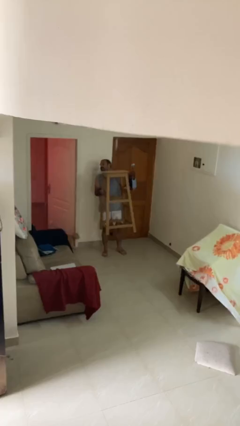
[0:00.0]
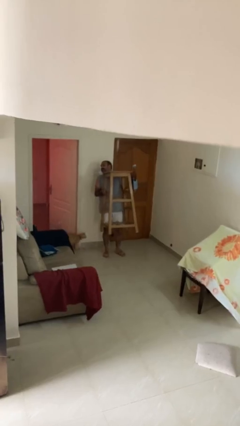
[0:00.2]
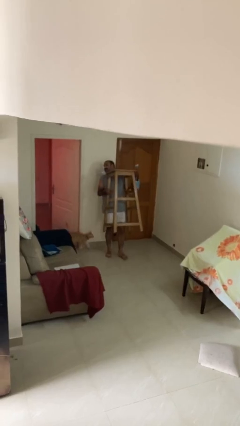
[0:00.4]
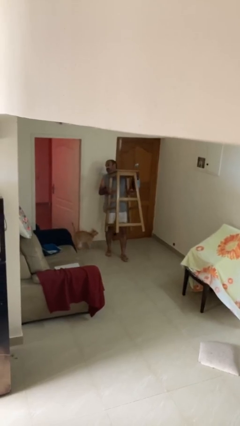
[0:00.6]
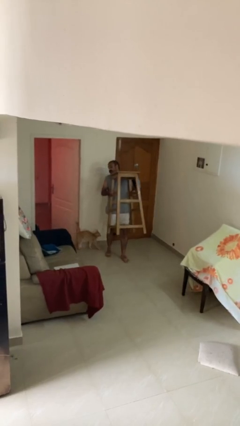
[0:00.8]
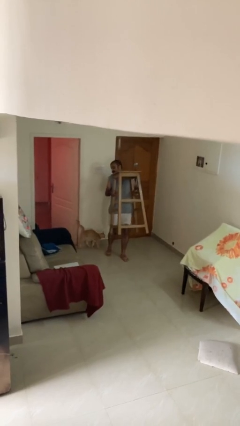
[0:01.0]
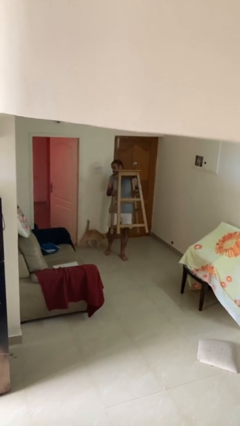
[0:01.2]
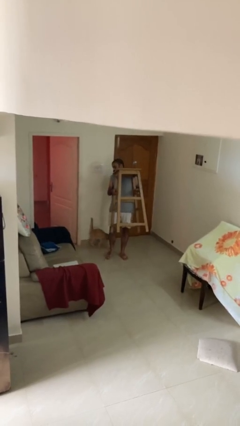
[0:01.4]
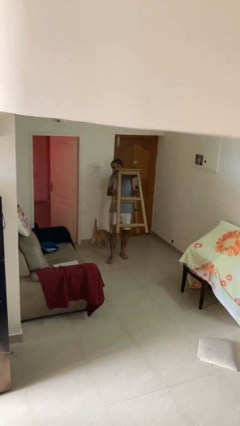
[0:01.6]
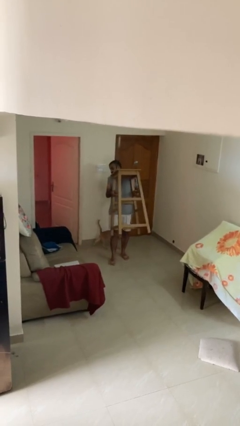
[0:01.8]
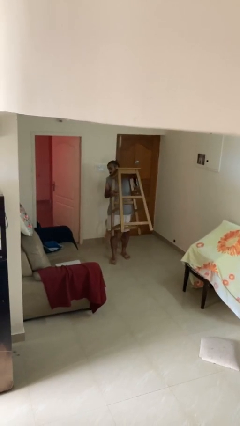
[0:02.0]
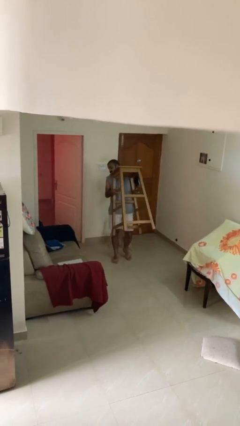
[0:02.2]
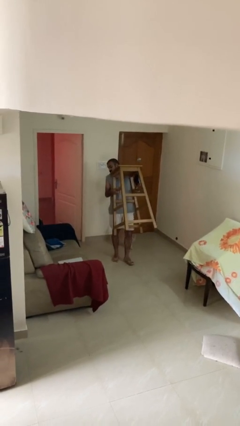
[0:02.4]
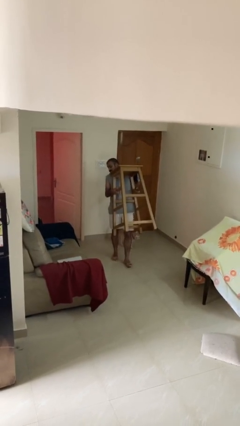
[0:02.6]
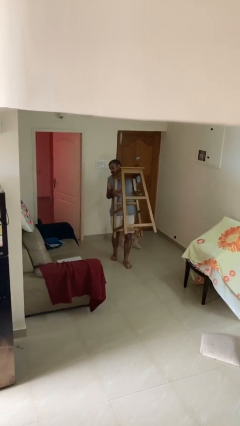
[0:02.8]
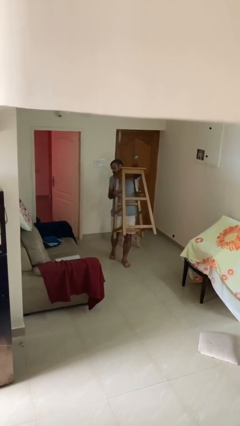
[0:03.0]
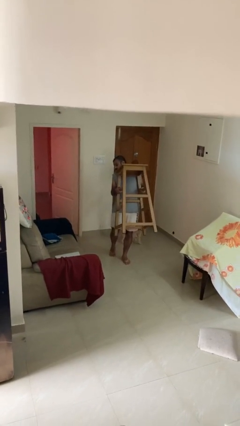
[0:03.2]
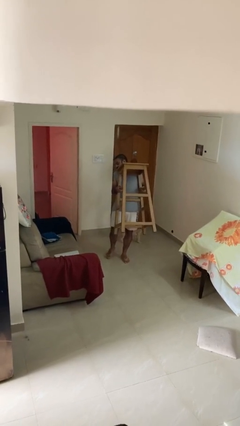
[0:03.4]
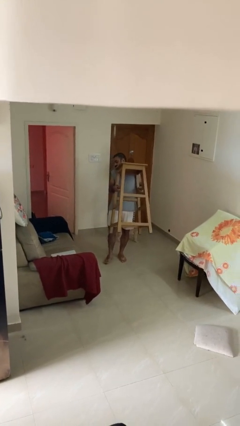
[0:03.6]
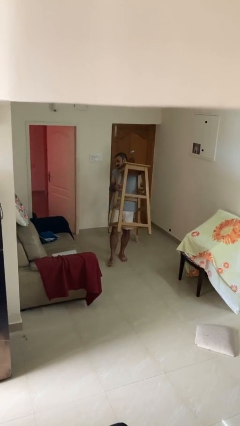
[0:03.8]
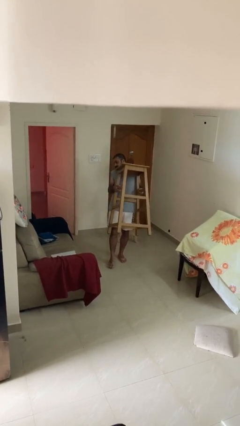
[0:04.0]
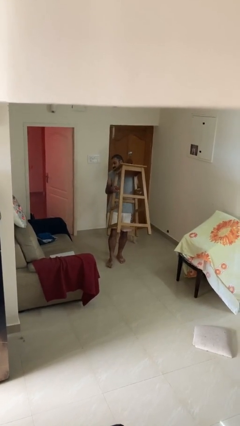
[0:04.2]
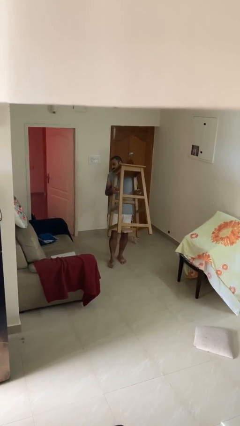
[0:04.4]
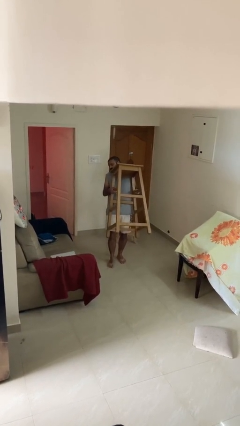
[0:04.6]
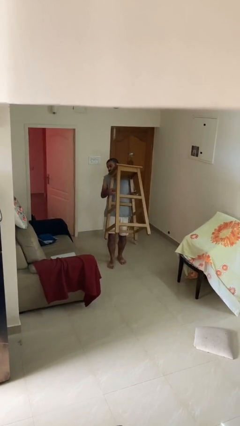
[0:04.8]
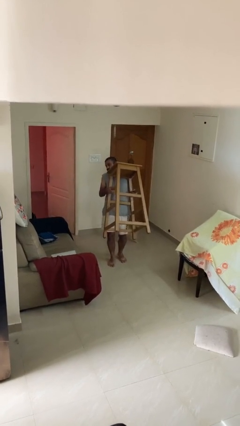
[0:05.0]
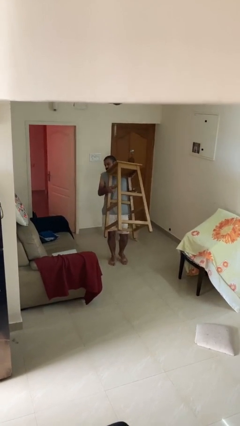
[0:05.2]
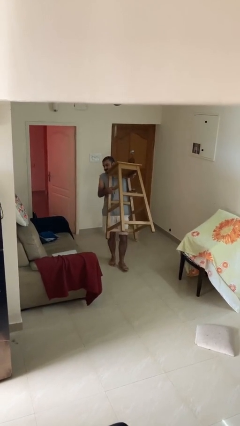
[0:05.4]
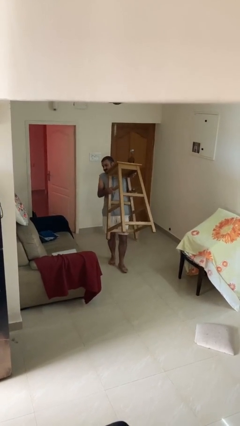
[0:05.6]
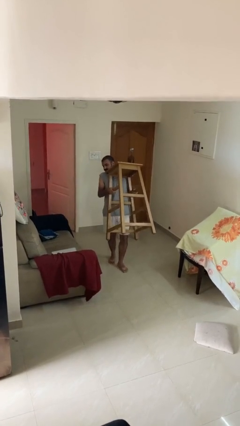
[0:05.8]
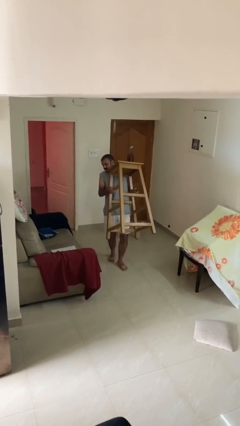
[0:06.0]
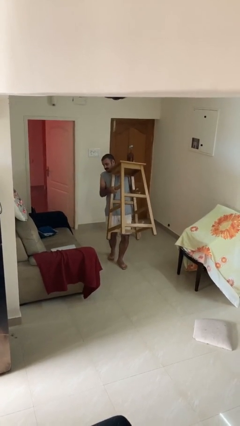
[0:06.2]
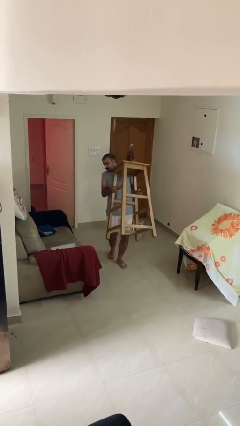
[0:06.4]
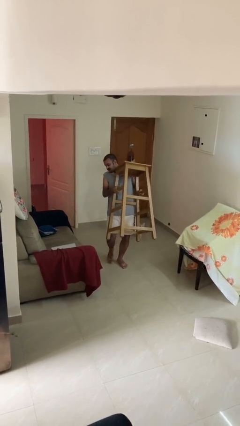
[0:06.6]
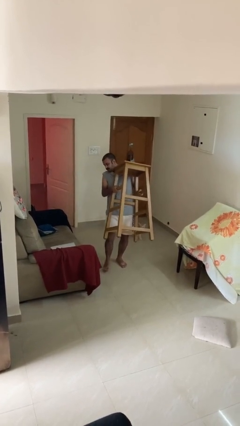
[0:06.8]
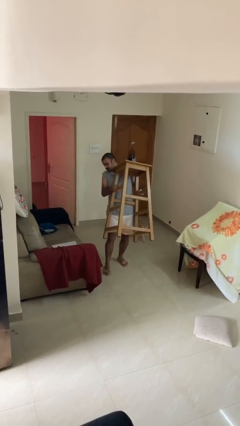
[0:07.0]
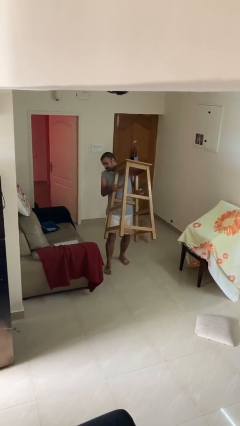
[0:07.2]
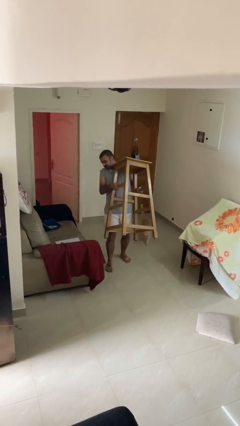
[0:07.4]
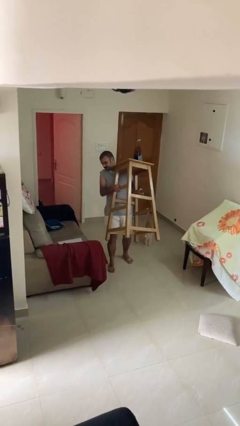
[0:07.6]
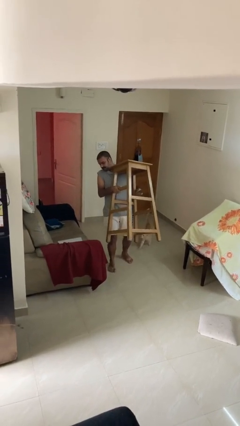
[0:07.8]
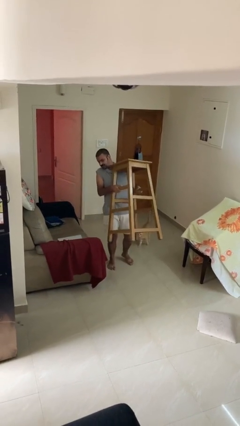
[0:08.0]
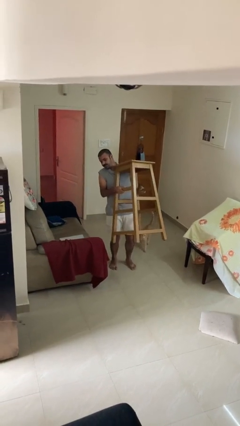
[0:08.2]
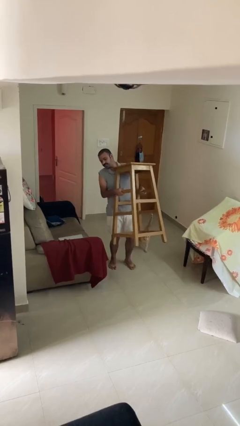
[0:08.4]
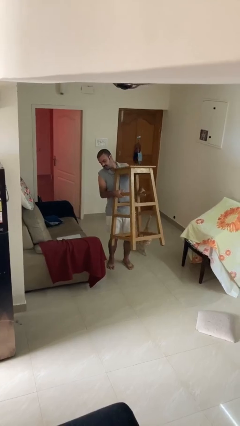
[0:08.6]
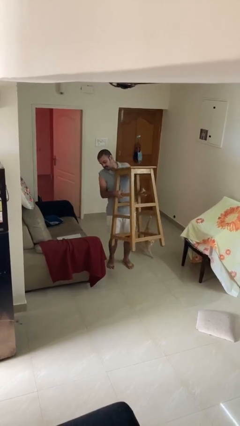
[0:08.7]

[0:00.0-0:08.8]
person carries heavy object

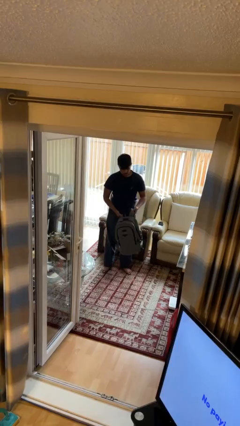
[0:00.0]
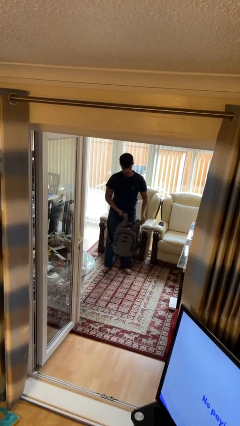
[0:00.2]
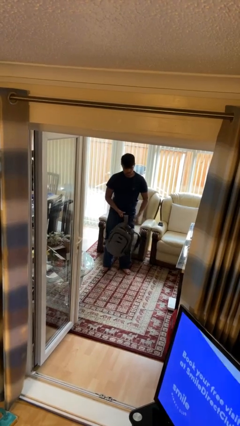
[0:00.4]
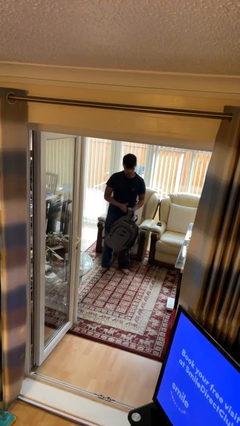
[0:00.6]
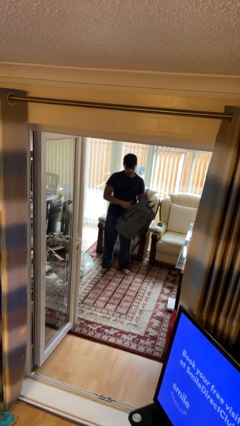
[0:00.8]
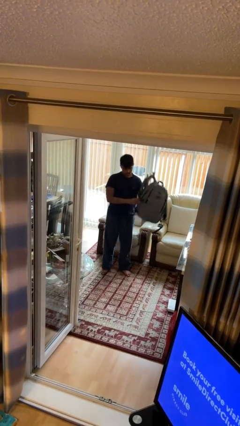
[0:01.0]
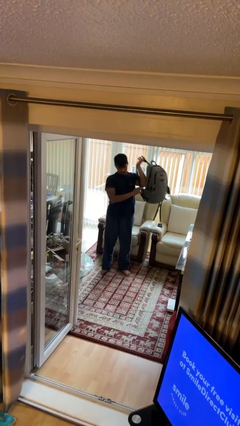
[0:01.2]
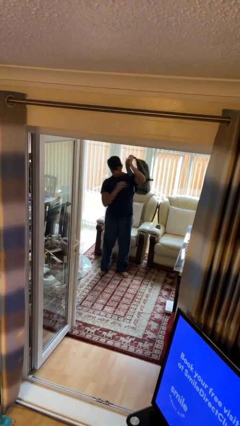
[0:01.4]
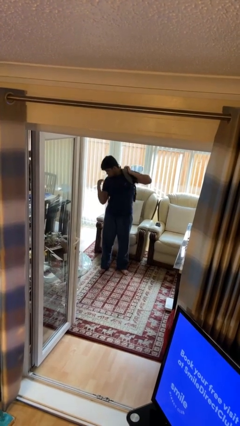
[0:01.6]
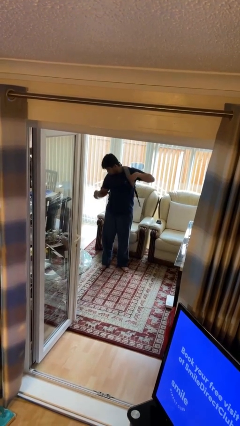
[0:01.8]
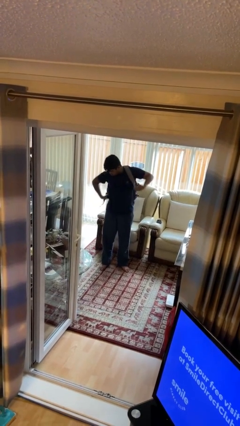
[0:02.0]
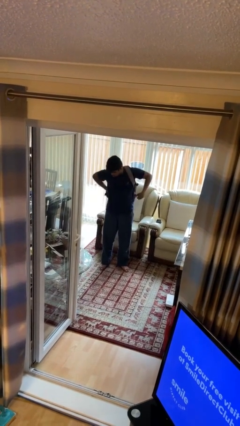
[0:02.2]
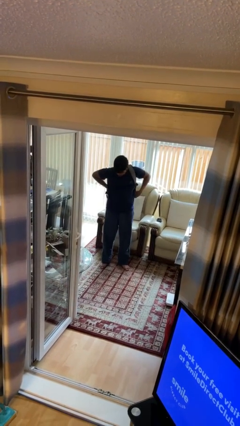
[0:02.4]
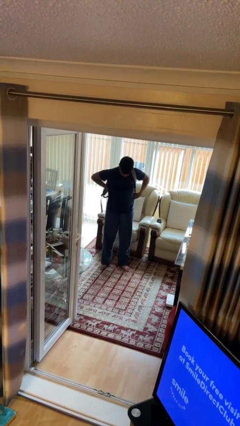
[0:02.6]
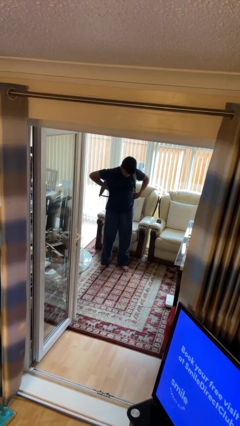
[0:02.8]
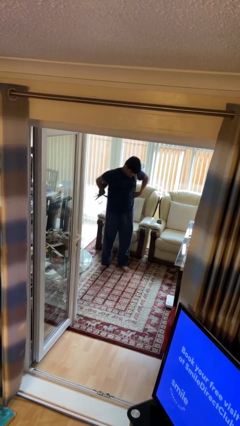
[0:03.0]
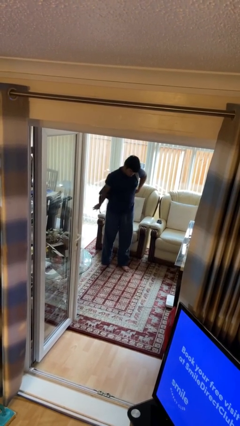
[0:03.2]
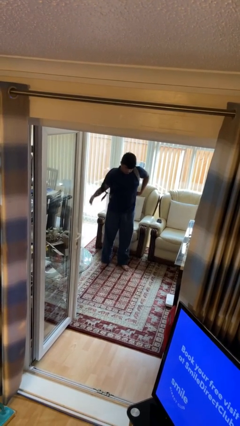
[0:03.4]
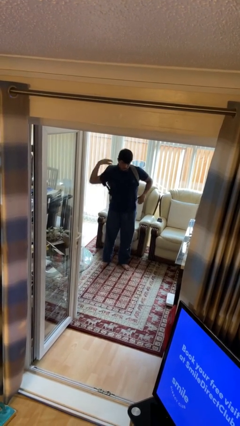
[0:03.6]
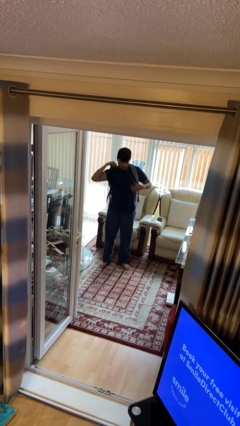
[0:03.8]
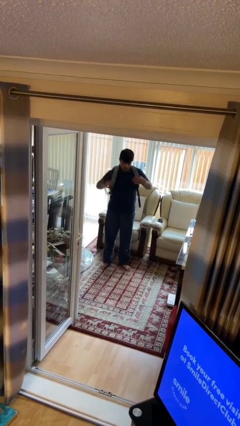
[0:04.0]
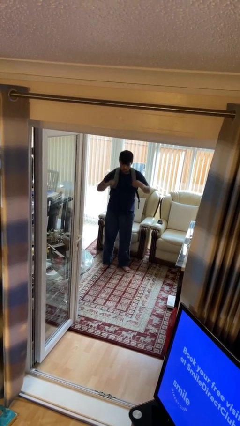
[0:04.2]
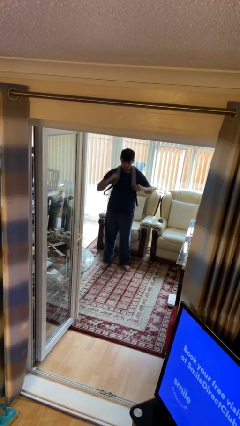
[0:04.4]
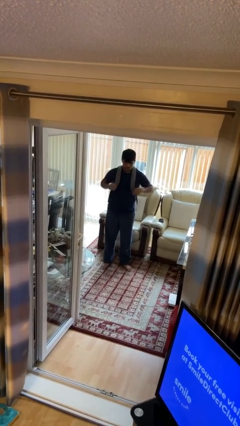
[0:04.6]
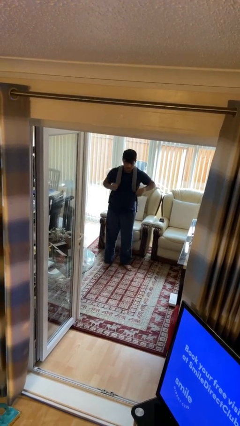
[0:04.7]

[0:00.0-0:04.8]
person puts on backpack

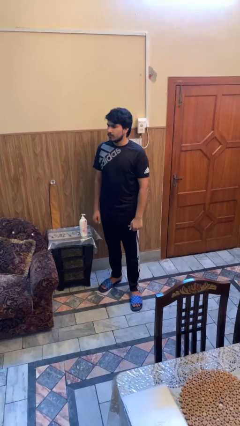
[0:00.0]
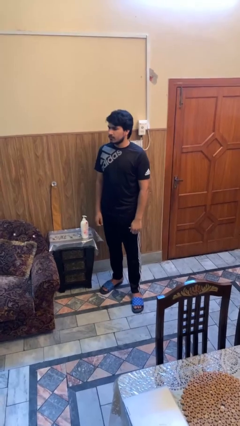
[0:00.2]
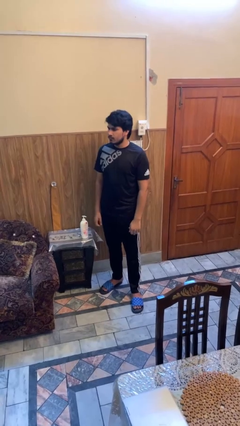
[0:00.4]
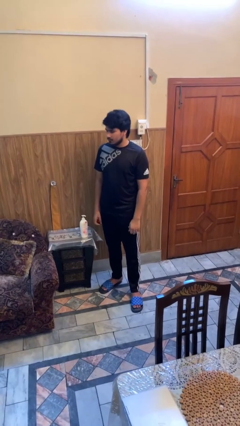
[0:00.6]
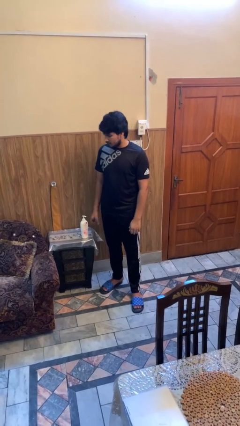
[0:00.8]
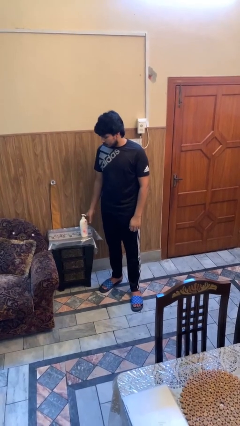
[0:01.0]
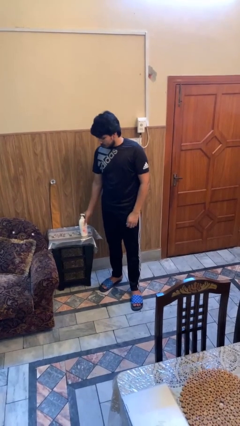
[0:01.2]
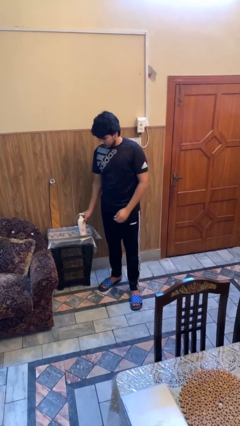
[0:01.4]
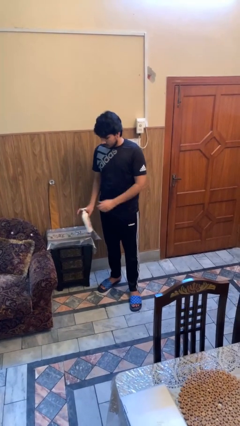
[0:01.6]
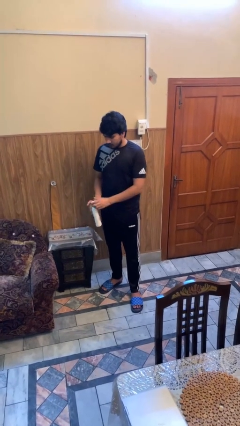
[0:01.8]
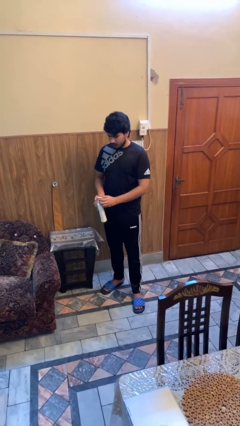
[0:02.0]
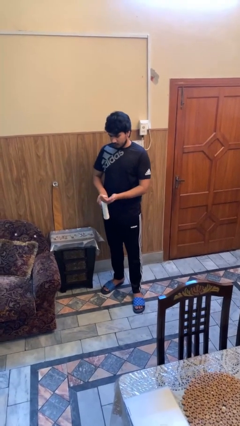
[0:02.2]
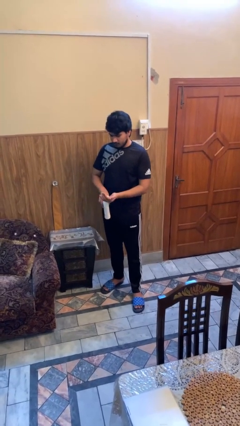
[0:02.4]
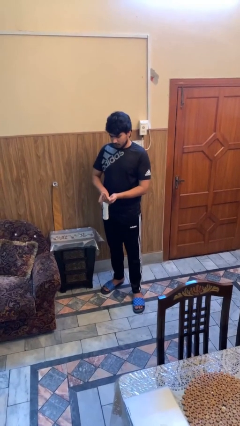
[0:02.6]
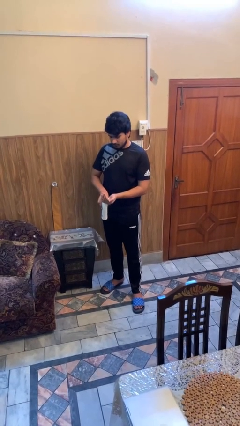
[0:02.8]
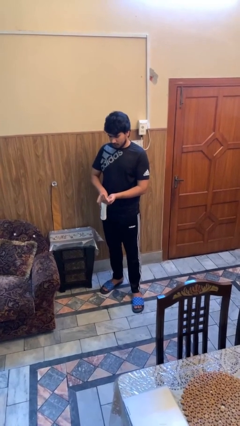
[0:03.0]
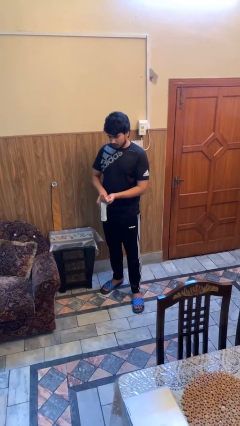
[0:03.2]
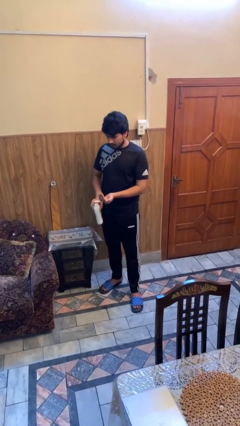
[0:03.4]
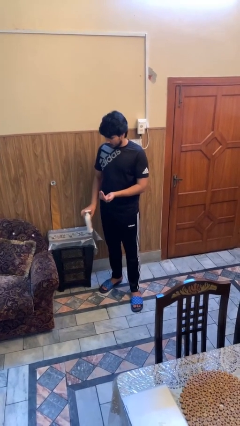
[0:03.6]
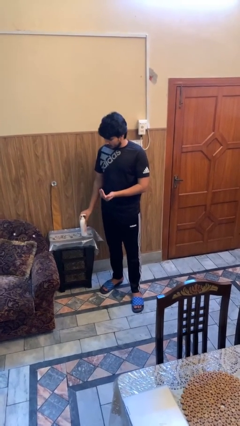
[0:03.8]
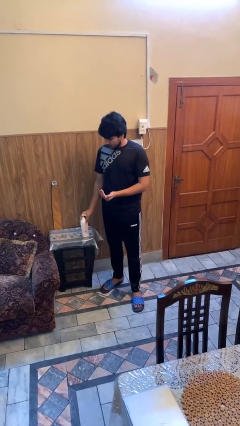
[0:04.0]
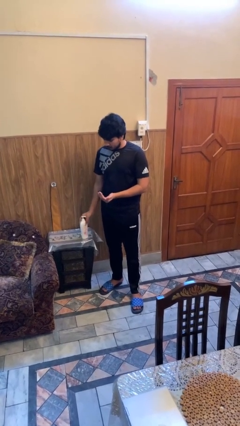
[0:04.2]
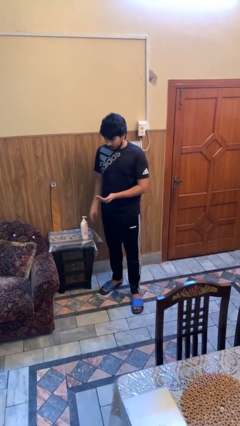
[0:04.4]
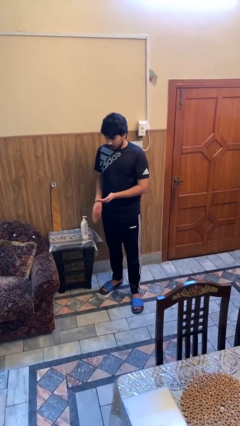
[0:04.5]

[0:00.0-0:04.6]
person applies sunscreen

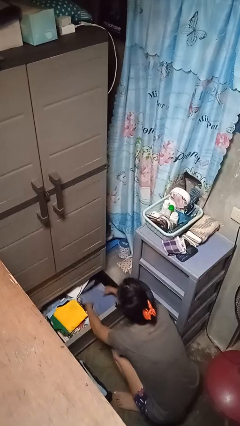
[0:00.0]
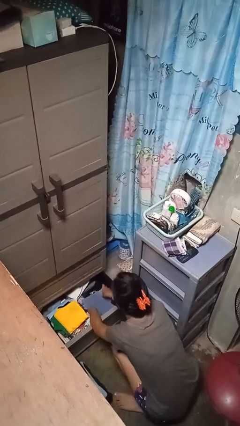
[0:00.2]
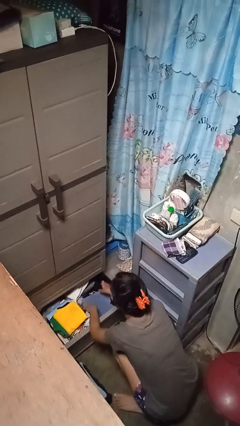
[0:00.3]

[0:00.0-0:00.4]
person puts clothes into dresser
